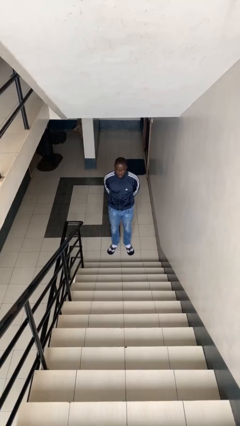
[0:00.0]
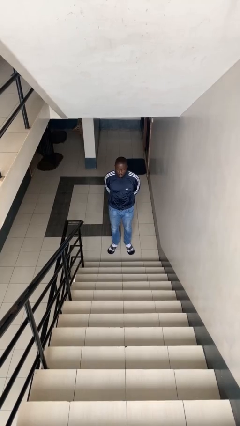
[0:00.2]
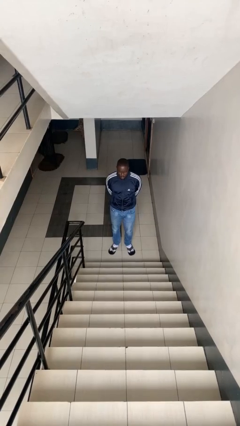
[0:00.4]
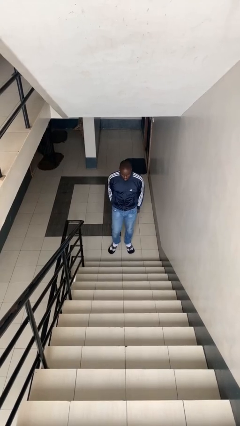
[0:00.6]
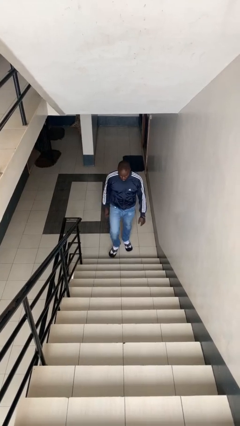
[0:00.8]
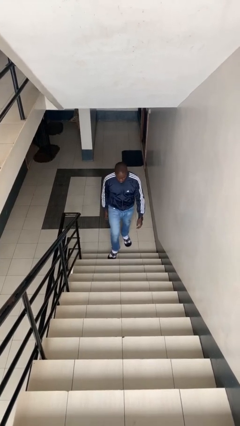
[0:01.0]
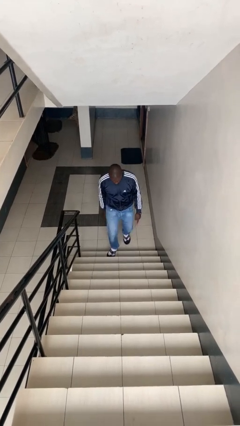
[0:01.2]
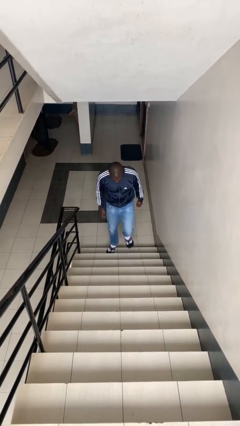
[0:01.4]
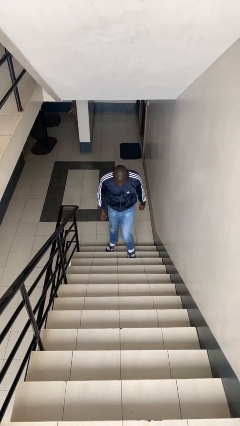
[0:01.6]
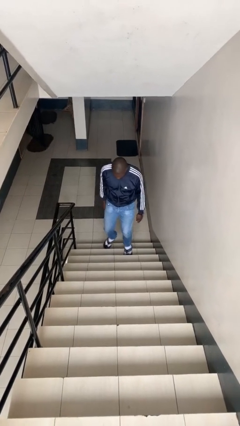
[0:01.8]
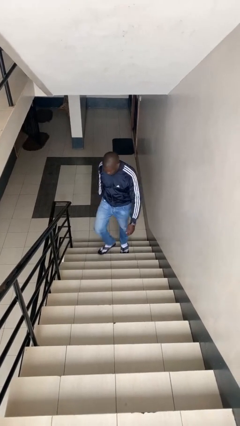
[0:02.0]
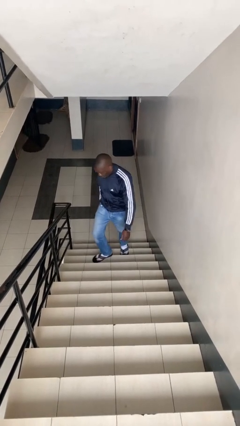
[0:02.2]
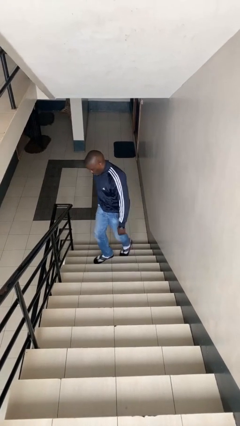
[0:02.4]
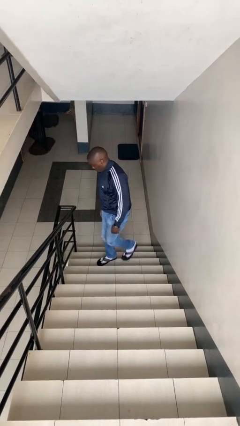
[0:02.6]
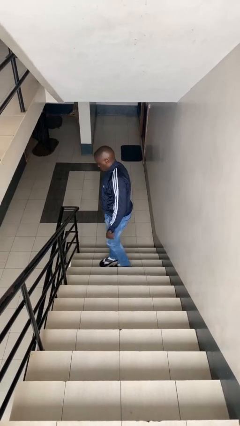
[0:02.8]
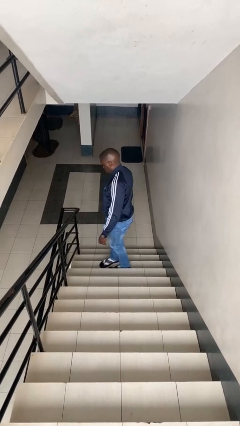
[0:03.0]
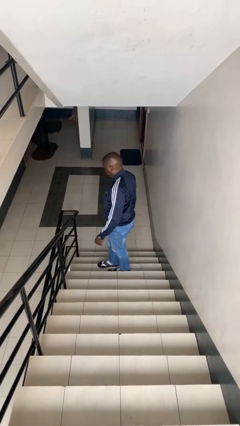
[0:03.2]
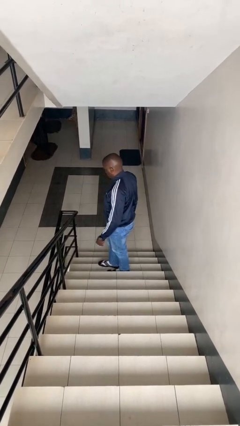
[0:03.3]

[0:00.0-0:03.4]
person climbs up stairs

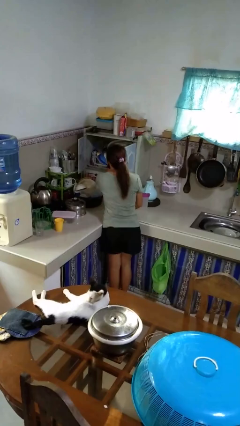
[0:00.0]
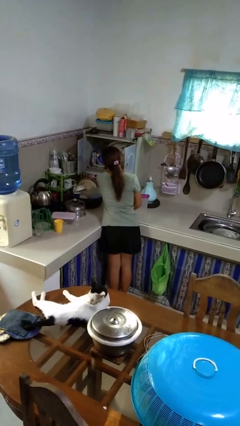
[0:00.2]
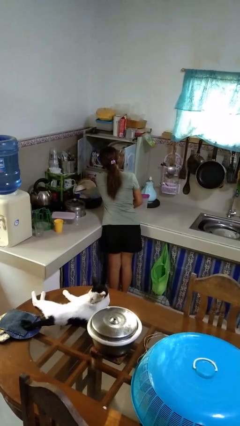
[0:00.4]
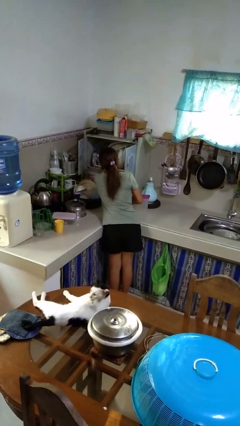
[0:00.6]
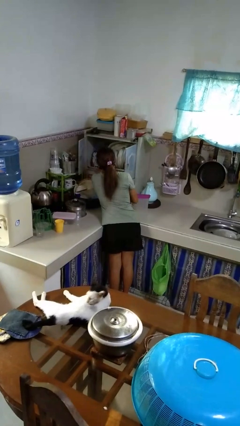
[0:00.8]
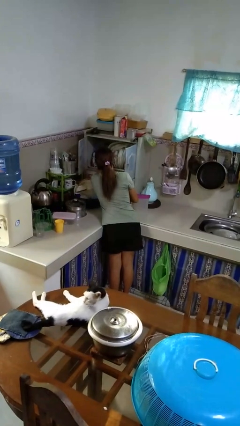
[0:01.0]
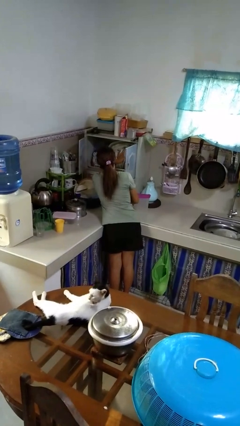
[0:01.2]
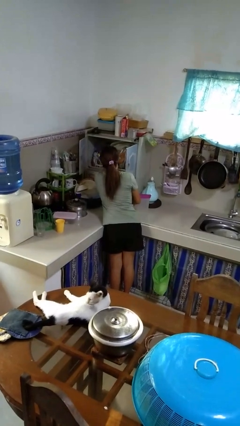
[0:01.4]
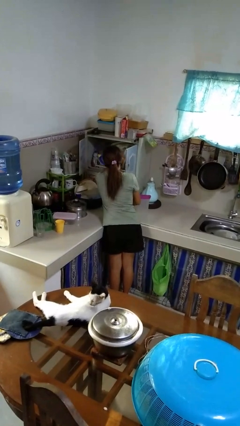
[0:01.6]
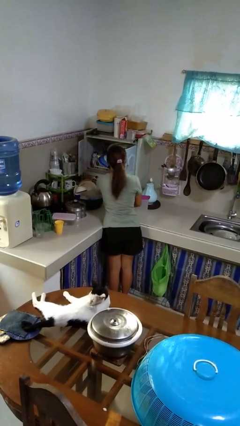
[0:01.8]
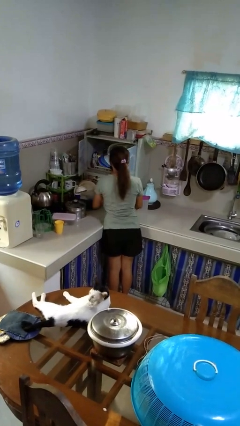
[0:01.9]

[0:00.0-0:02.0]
person searches in kitchen drawer

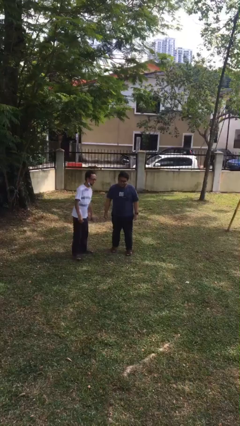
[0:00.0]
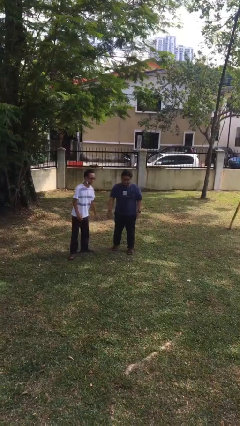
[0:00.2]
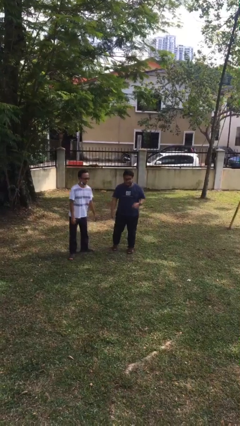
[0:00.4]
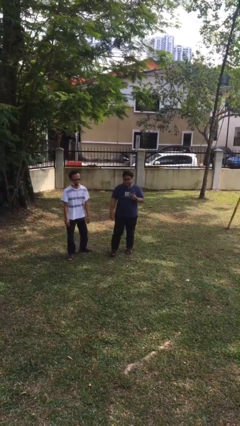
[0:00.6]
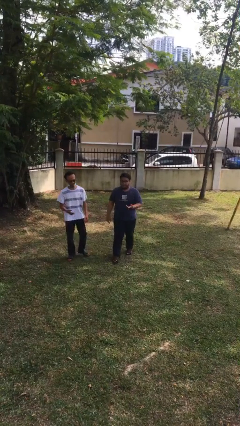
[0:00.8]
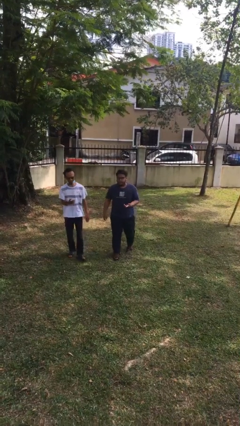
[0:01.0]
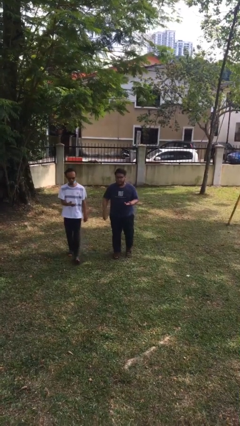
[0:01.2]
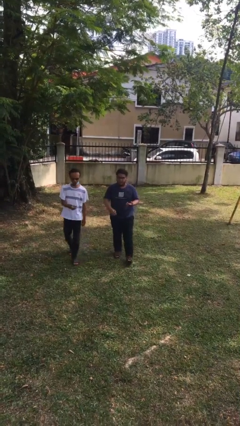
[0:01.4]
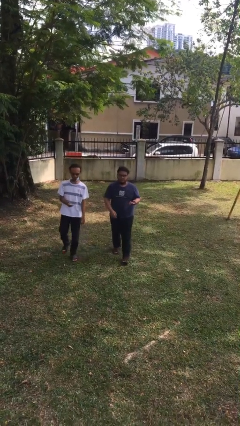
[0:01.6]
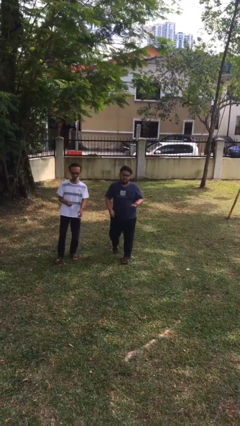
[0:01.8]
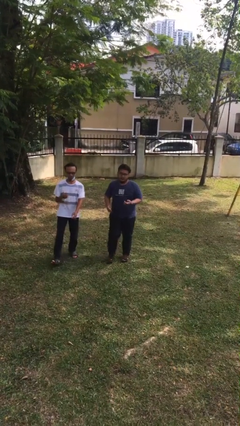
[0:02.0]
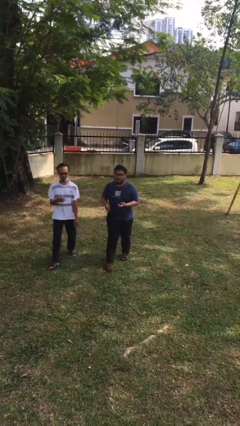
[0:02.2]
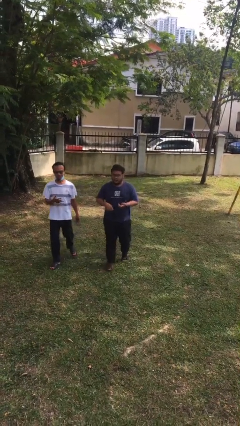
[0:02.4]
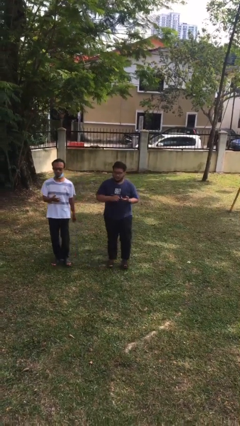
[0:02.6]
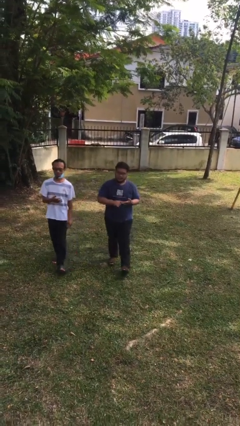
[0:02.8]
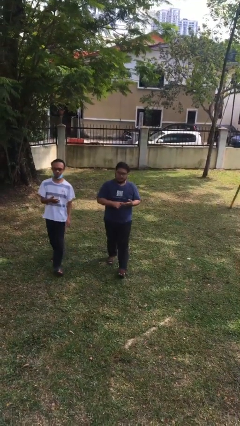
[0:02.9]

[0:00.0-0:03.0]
person talks to person

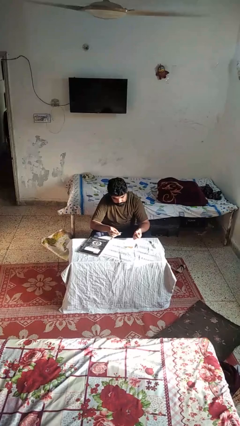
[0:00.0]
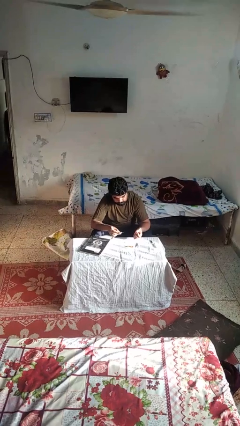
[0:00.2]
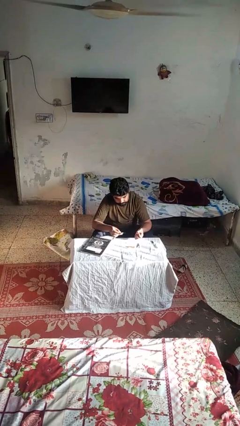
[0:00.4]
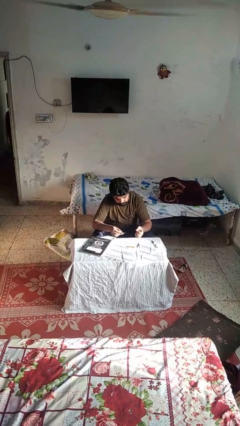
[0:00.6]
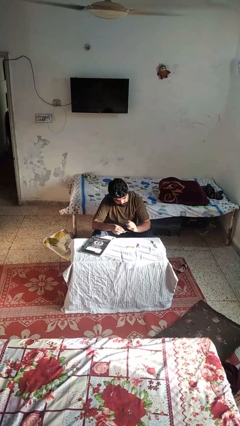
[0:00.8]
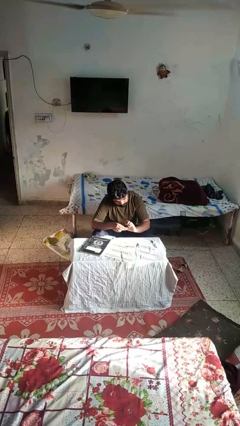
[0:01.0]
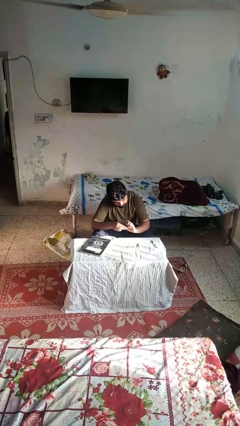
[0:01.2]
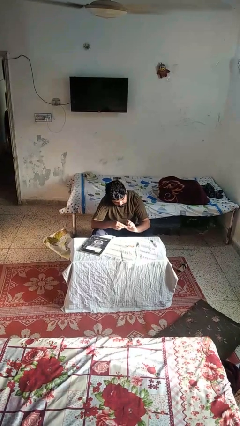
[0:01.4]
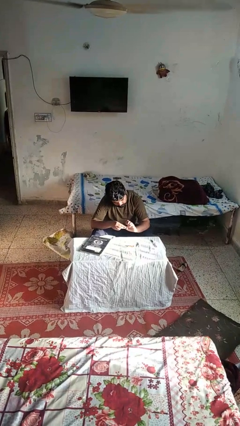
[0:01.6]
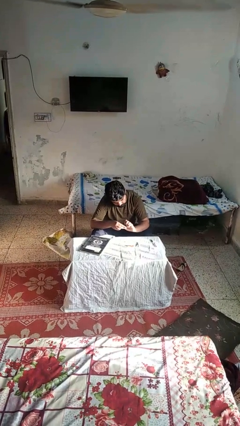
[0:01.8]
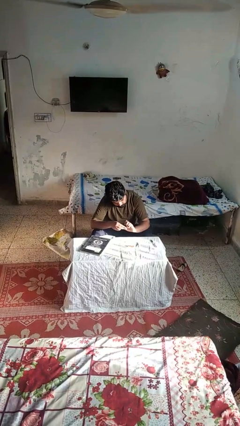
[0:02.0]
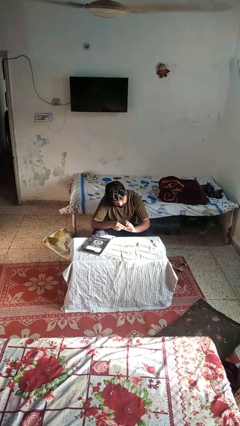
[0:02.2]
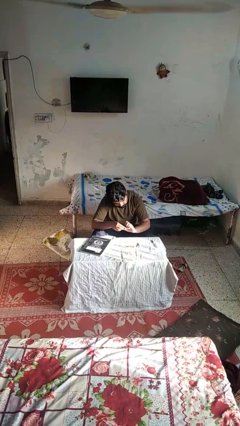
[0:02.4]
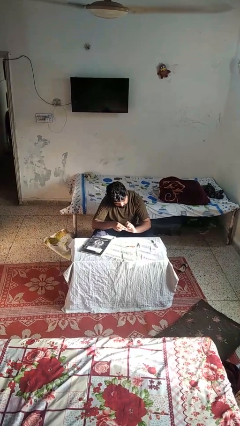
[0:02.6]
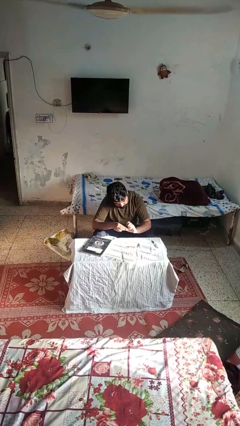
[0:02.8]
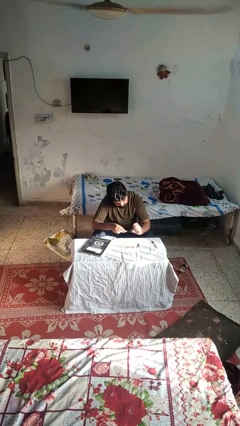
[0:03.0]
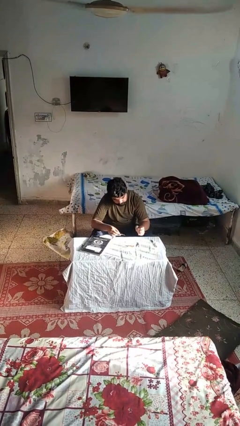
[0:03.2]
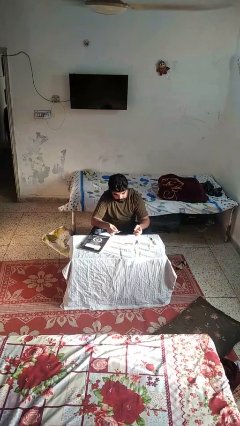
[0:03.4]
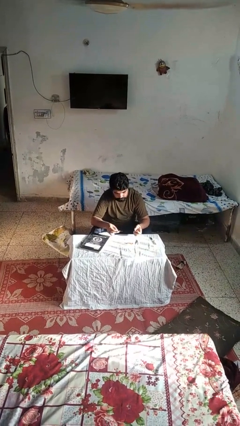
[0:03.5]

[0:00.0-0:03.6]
person files fingernails

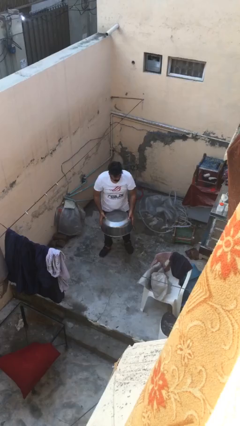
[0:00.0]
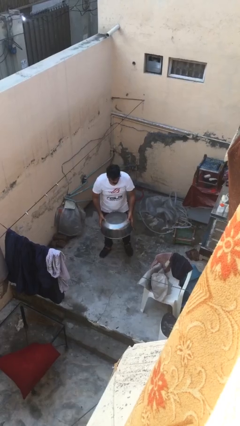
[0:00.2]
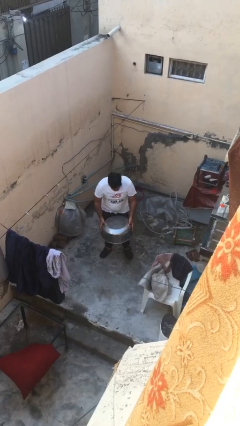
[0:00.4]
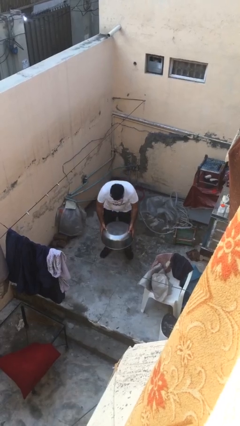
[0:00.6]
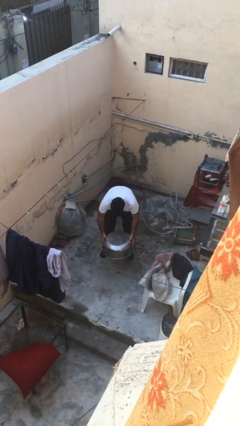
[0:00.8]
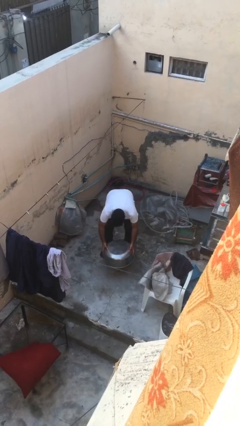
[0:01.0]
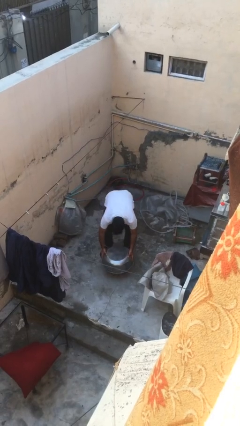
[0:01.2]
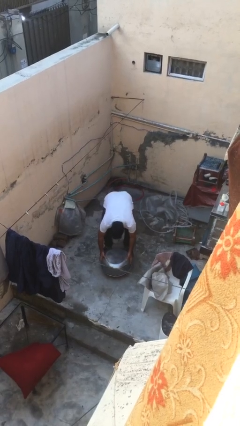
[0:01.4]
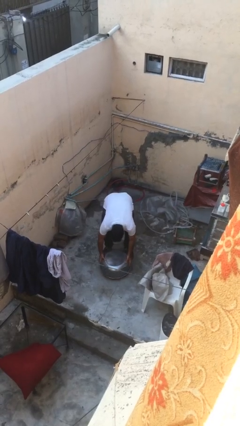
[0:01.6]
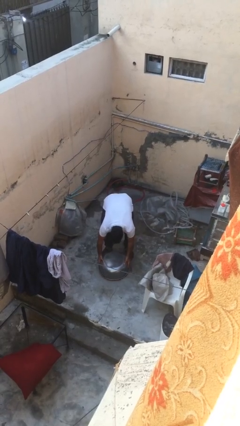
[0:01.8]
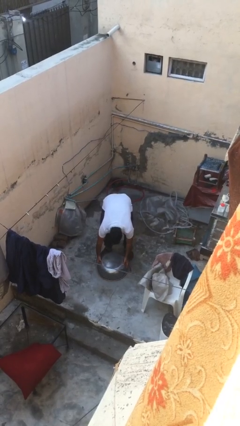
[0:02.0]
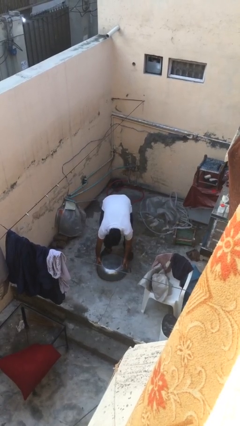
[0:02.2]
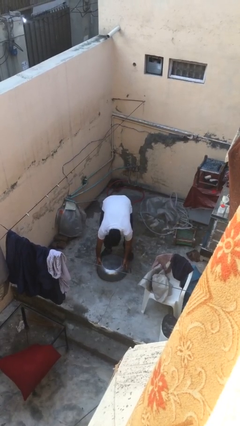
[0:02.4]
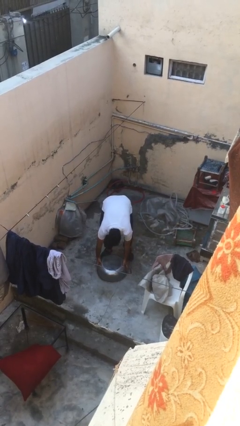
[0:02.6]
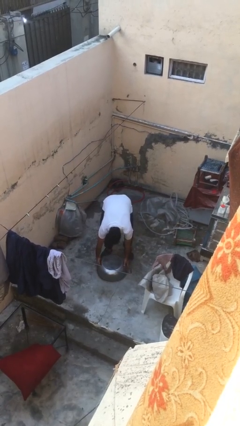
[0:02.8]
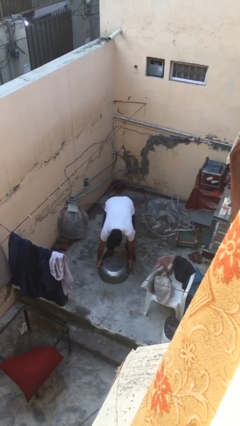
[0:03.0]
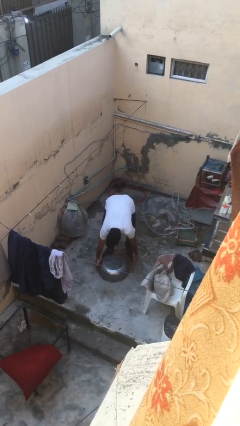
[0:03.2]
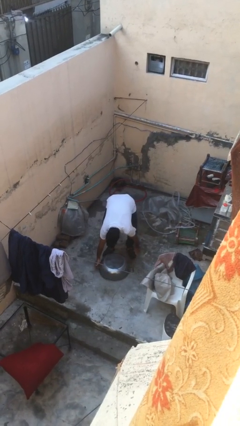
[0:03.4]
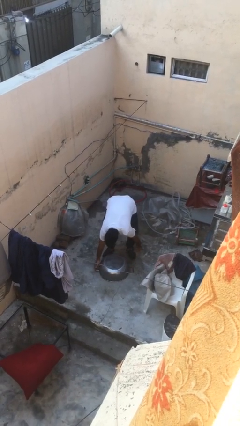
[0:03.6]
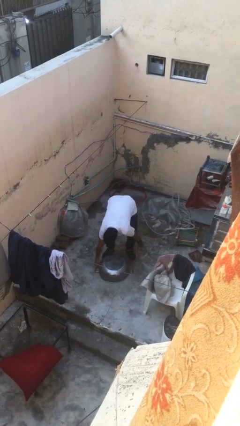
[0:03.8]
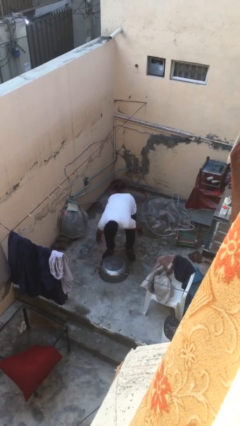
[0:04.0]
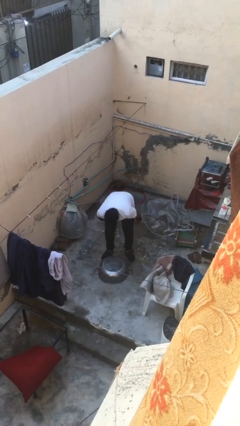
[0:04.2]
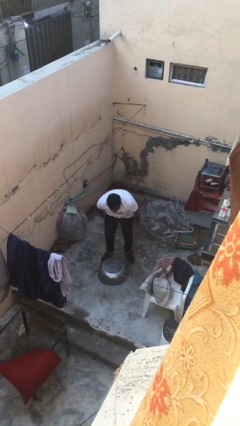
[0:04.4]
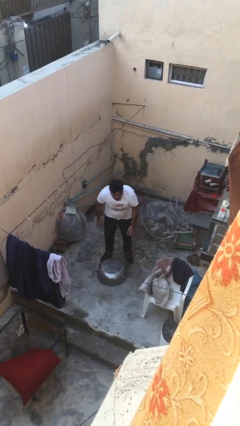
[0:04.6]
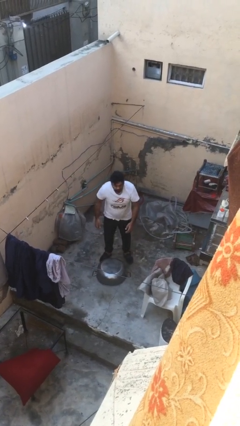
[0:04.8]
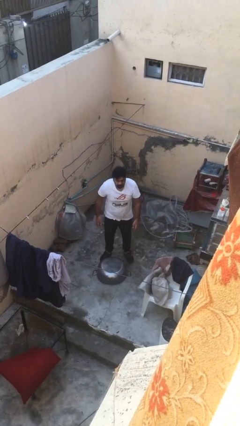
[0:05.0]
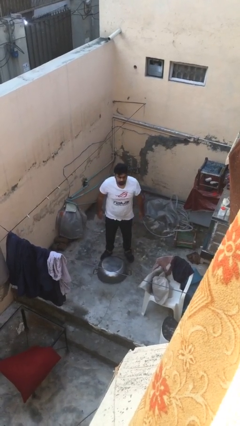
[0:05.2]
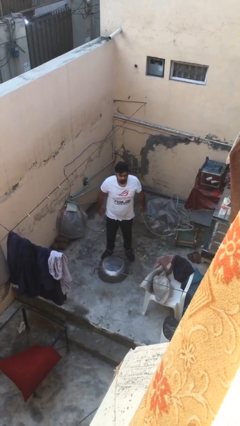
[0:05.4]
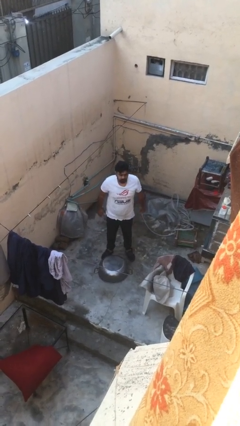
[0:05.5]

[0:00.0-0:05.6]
person puts down object on floor
